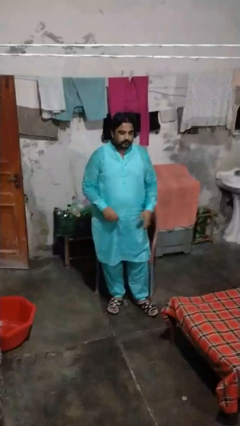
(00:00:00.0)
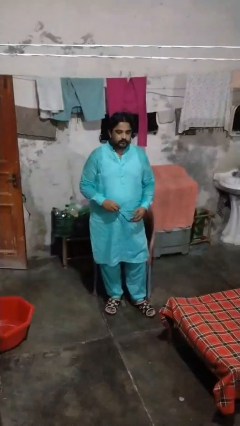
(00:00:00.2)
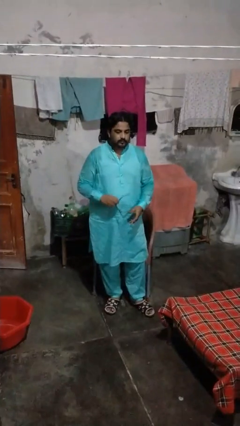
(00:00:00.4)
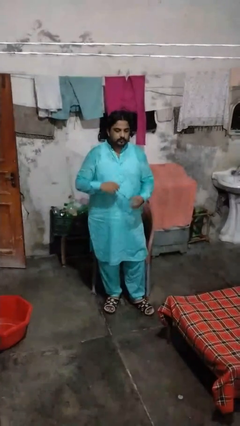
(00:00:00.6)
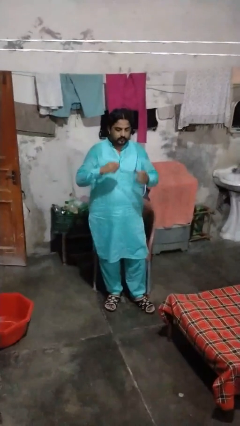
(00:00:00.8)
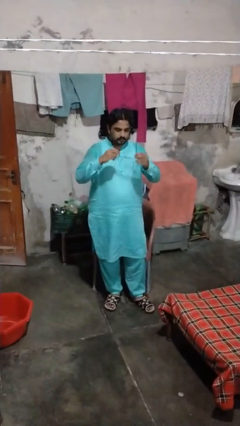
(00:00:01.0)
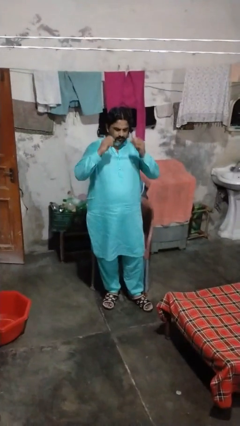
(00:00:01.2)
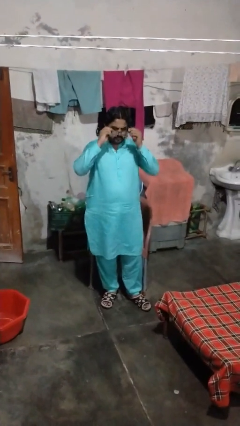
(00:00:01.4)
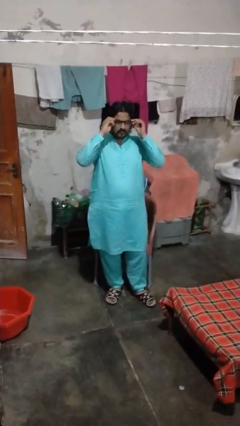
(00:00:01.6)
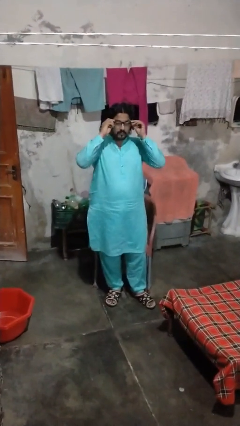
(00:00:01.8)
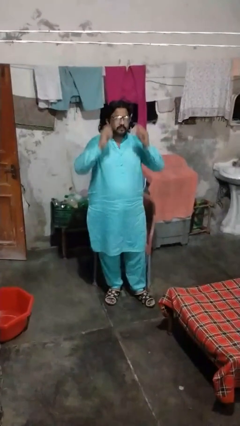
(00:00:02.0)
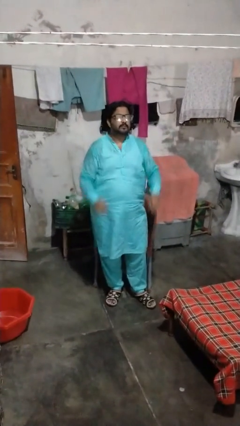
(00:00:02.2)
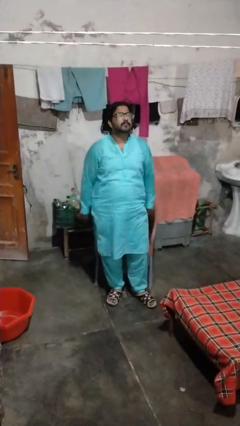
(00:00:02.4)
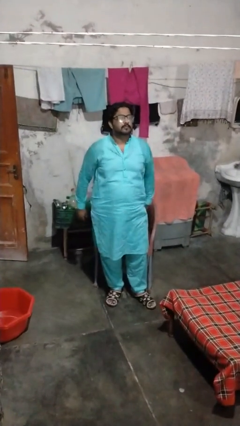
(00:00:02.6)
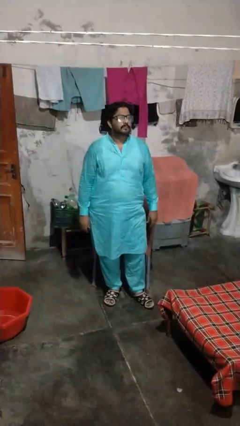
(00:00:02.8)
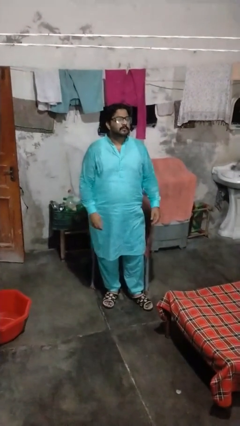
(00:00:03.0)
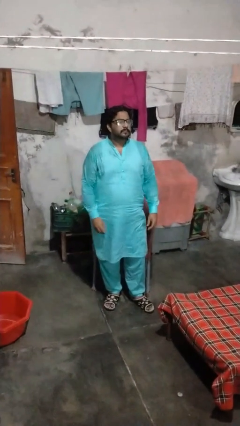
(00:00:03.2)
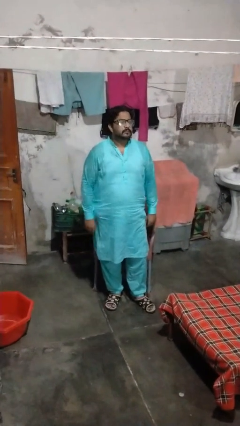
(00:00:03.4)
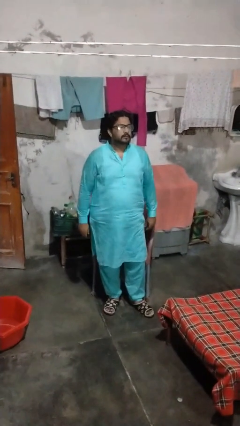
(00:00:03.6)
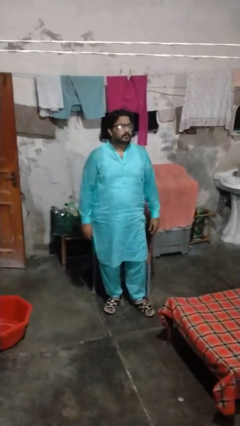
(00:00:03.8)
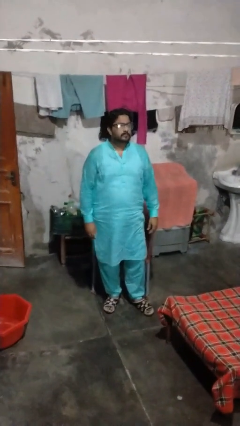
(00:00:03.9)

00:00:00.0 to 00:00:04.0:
person puts on glasses

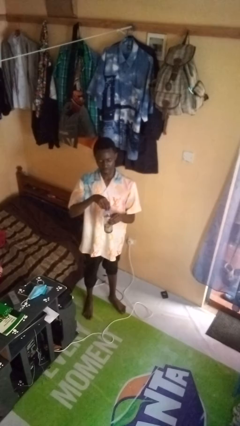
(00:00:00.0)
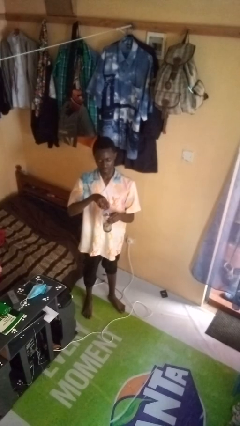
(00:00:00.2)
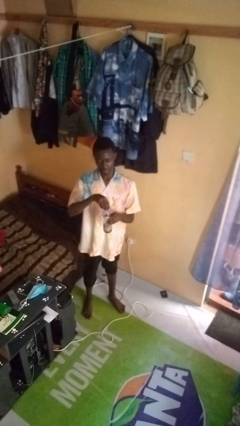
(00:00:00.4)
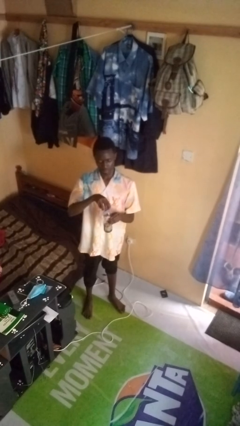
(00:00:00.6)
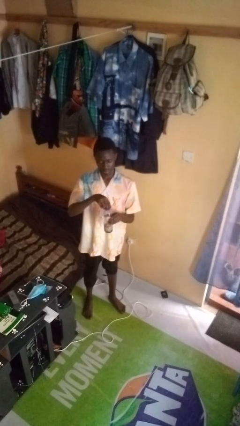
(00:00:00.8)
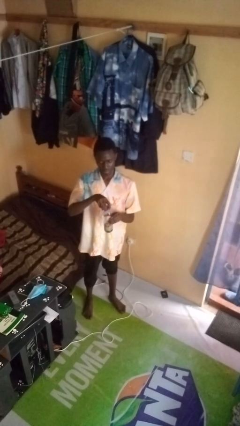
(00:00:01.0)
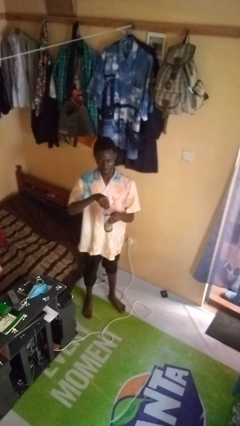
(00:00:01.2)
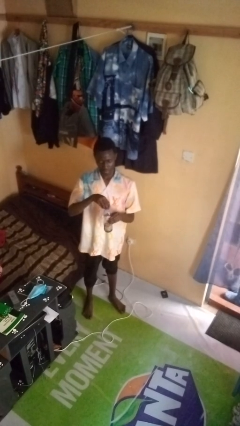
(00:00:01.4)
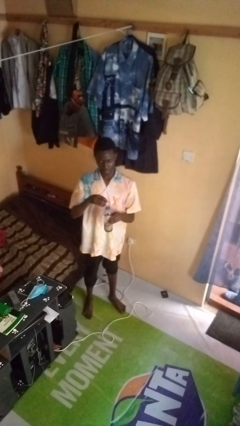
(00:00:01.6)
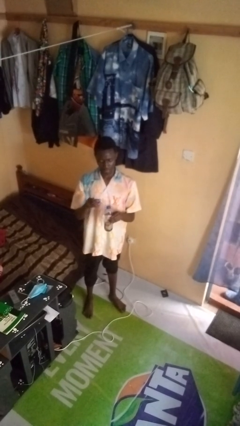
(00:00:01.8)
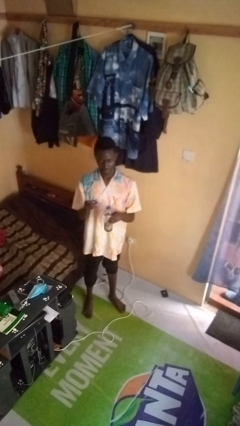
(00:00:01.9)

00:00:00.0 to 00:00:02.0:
person unscrews lid from bottle

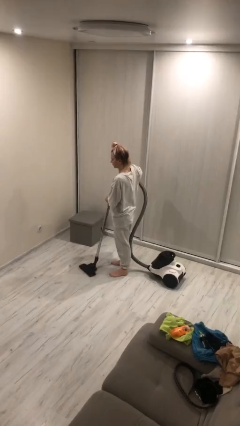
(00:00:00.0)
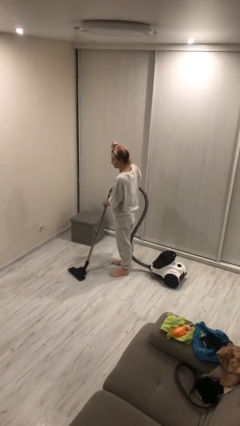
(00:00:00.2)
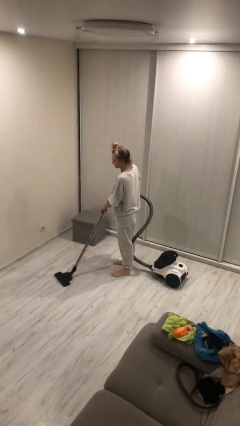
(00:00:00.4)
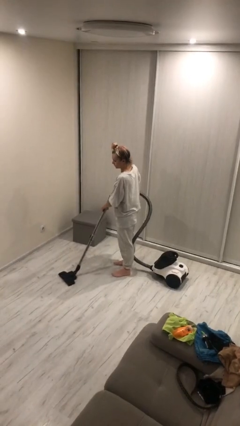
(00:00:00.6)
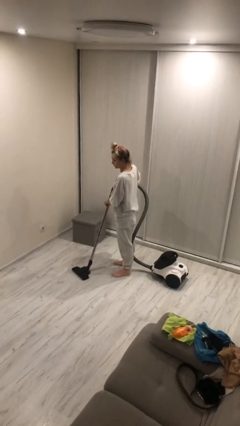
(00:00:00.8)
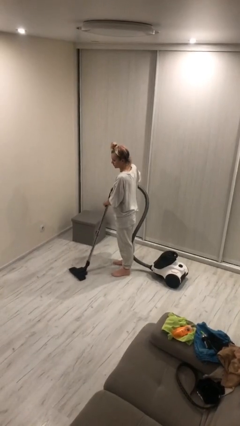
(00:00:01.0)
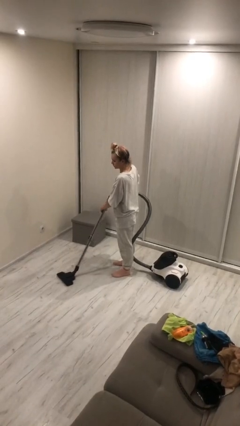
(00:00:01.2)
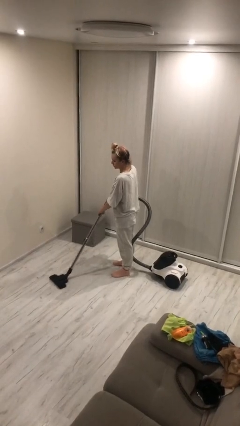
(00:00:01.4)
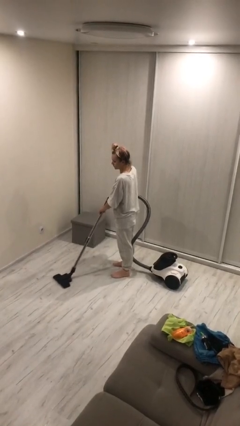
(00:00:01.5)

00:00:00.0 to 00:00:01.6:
person vacuums carpet

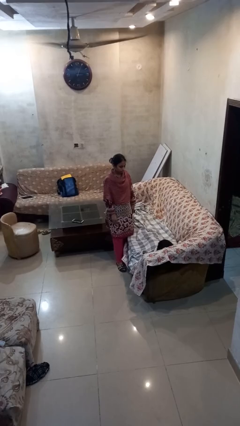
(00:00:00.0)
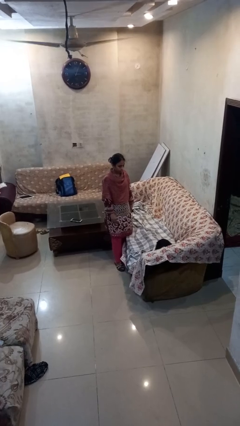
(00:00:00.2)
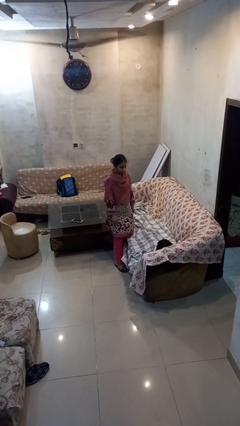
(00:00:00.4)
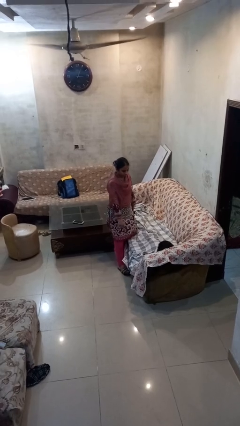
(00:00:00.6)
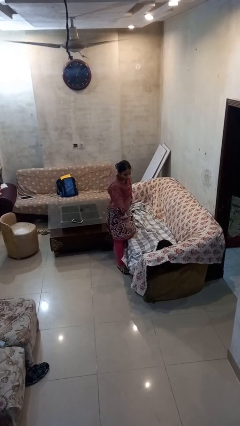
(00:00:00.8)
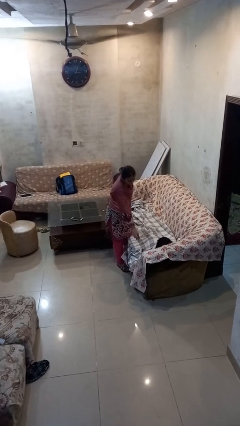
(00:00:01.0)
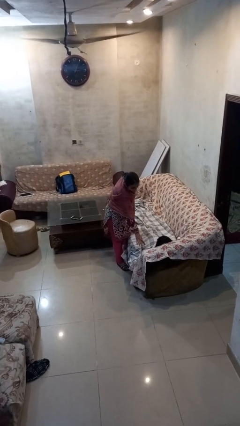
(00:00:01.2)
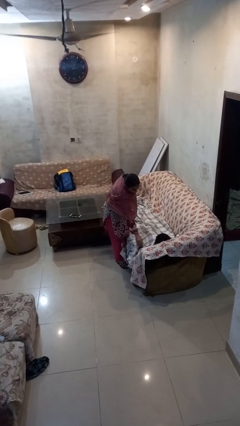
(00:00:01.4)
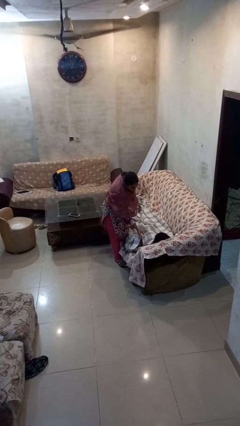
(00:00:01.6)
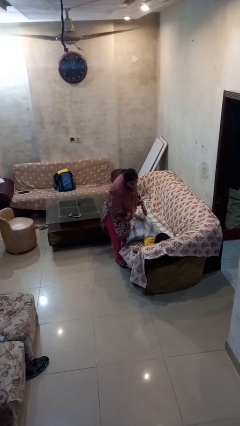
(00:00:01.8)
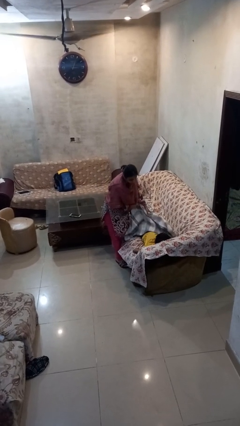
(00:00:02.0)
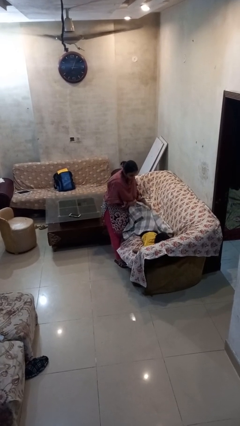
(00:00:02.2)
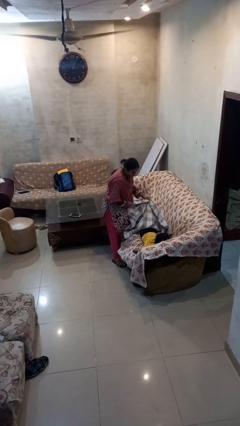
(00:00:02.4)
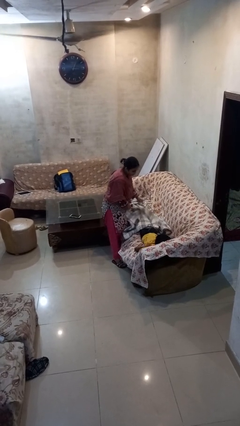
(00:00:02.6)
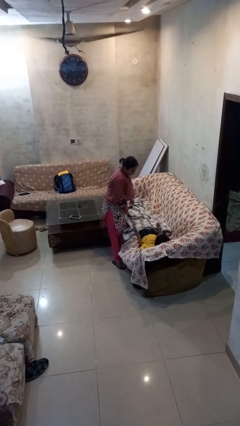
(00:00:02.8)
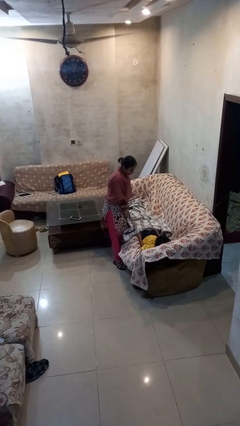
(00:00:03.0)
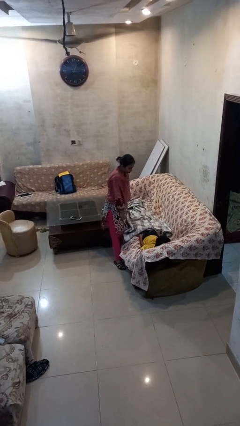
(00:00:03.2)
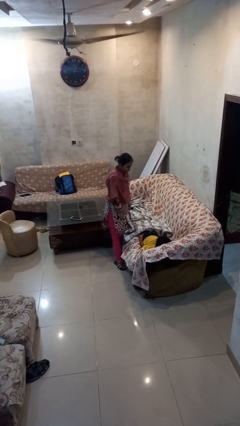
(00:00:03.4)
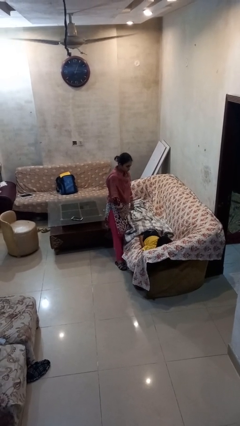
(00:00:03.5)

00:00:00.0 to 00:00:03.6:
person uncovers friend with blanket

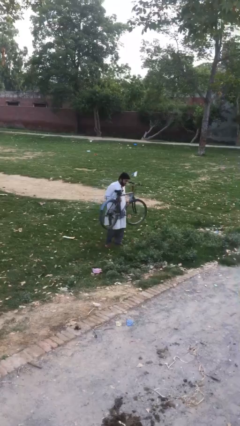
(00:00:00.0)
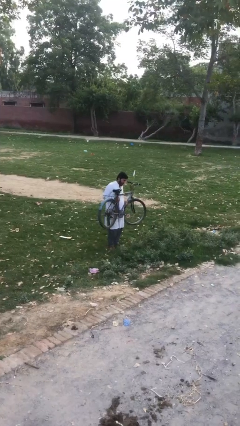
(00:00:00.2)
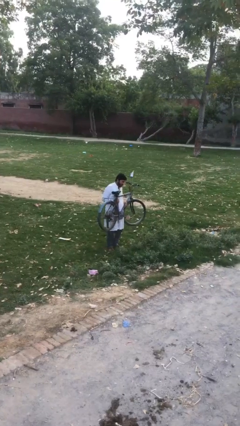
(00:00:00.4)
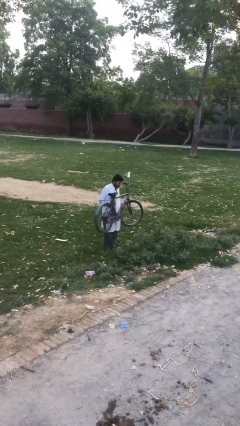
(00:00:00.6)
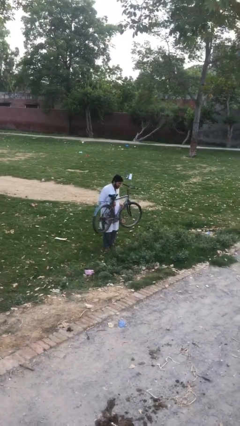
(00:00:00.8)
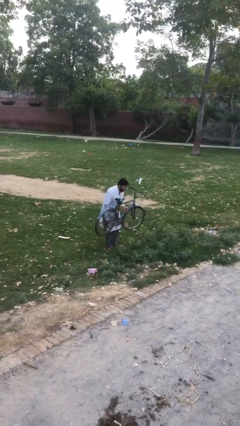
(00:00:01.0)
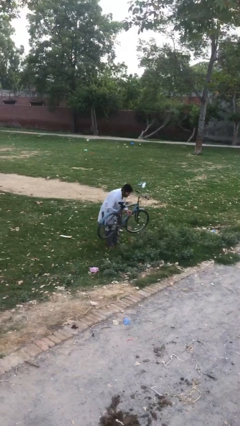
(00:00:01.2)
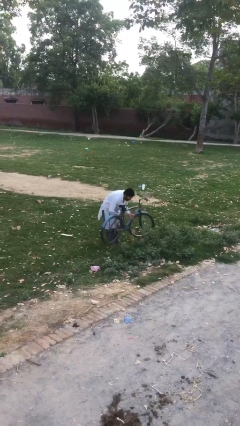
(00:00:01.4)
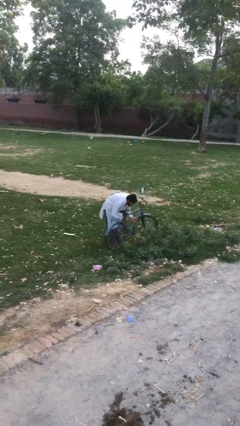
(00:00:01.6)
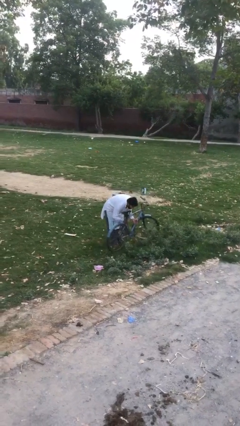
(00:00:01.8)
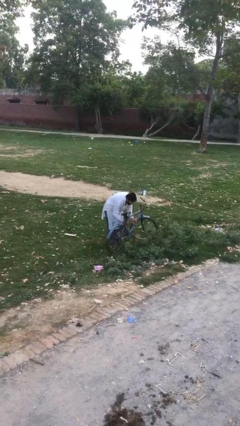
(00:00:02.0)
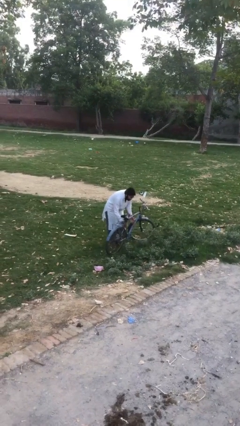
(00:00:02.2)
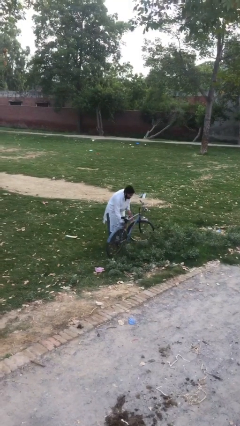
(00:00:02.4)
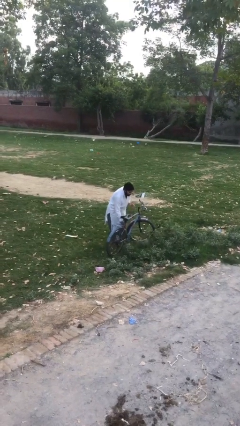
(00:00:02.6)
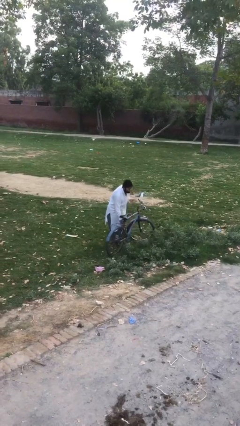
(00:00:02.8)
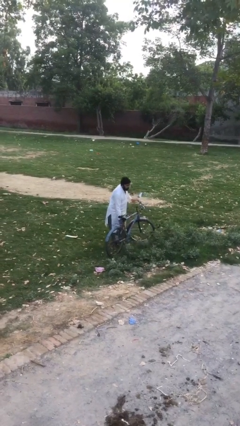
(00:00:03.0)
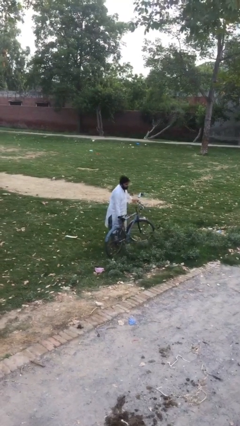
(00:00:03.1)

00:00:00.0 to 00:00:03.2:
person puts down object on floor

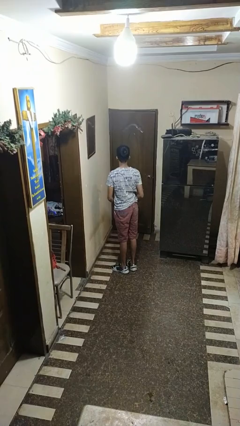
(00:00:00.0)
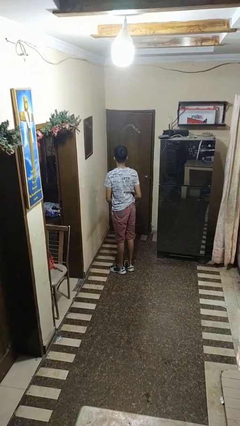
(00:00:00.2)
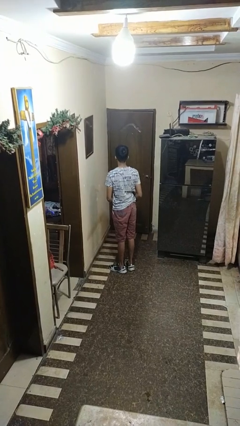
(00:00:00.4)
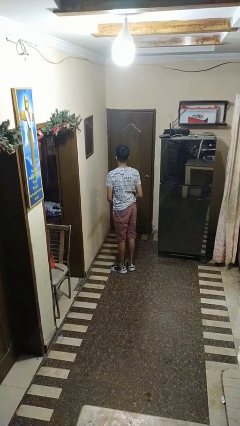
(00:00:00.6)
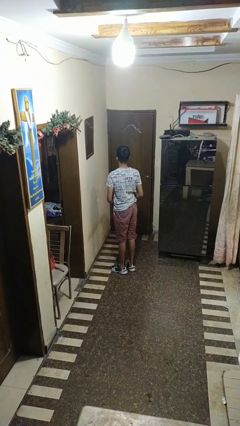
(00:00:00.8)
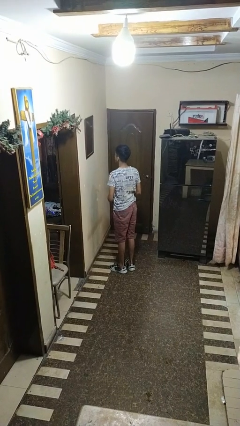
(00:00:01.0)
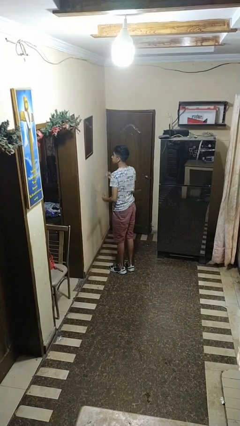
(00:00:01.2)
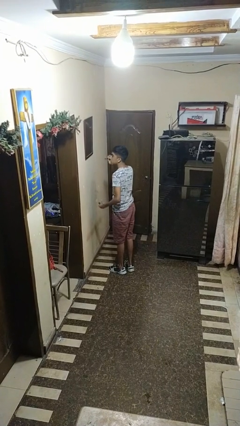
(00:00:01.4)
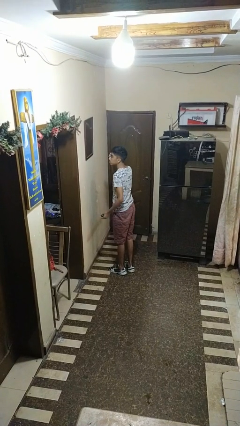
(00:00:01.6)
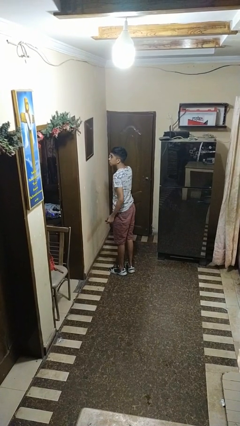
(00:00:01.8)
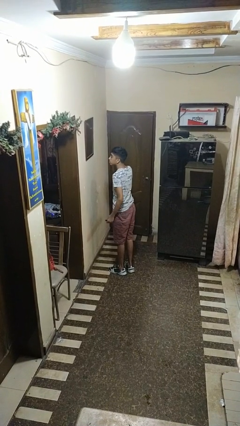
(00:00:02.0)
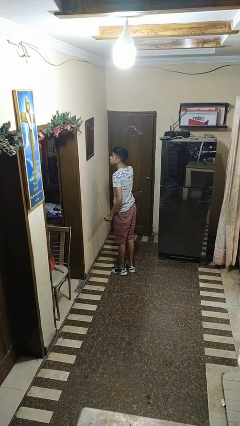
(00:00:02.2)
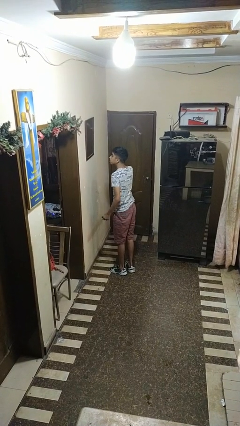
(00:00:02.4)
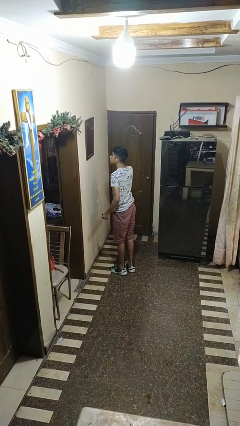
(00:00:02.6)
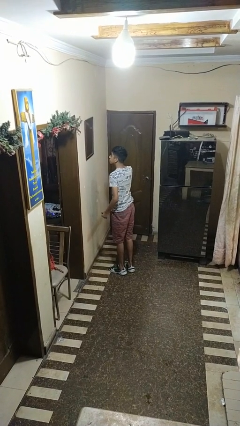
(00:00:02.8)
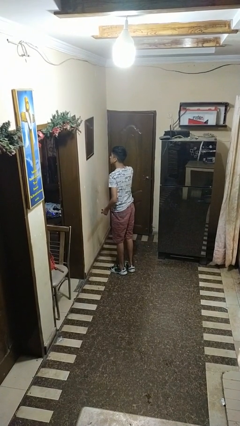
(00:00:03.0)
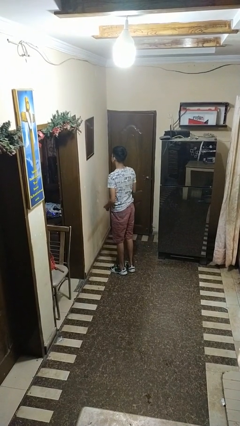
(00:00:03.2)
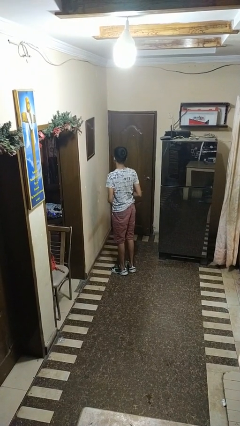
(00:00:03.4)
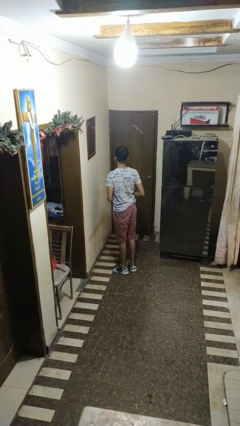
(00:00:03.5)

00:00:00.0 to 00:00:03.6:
person applies eye makeup
